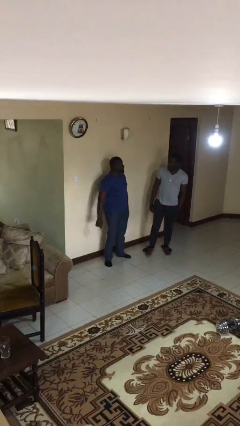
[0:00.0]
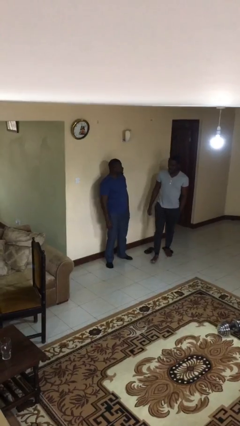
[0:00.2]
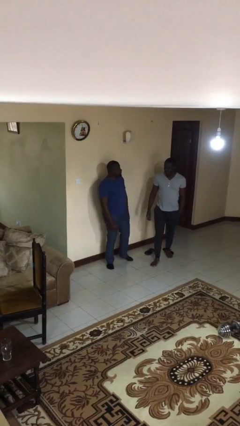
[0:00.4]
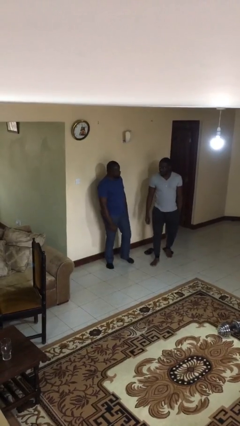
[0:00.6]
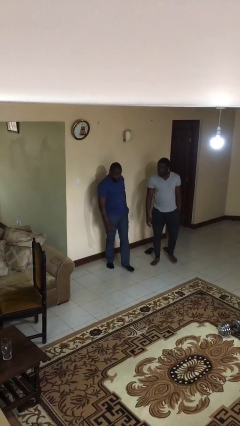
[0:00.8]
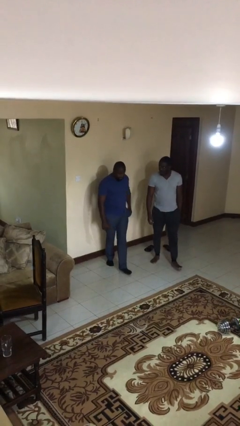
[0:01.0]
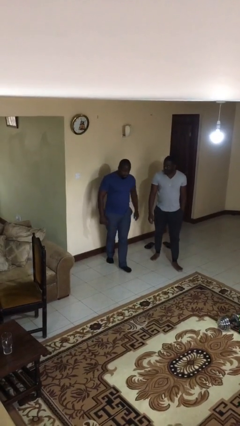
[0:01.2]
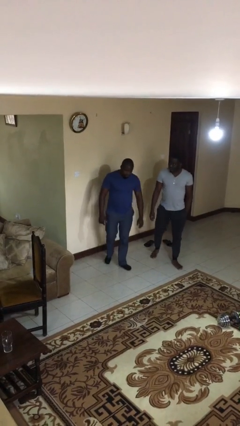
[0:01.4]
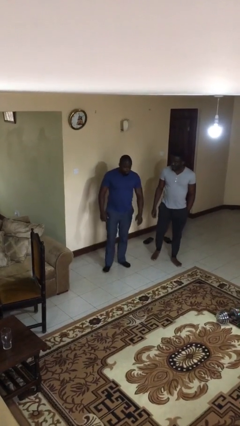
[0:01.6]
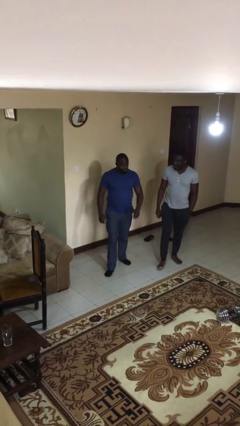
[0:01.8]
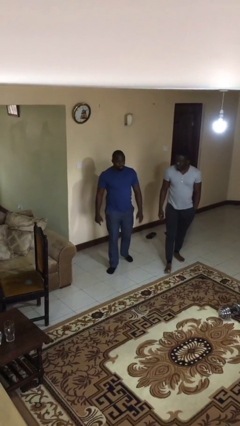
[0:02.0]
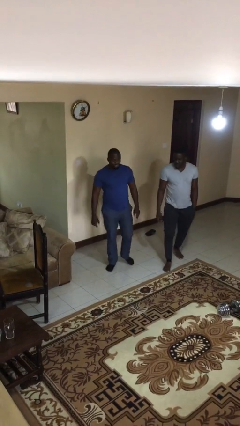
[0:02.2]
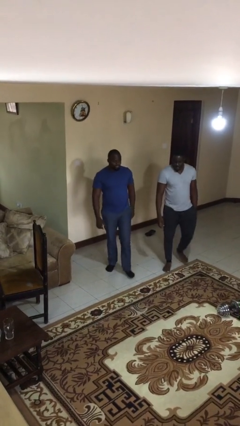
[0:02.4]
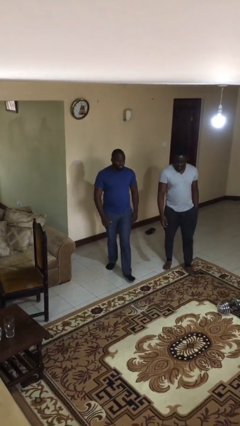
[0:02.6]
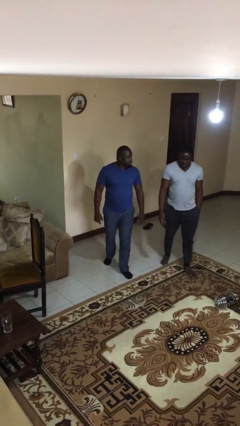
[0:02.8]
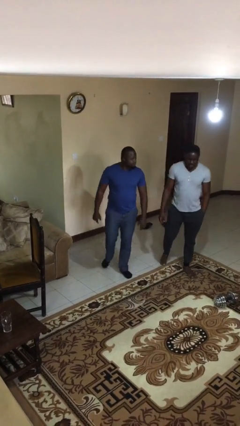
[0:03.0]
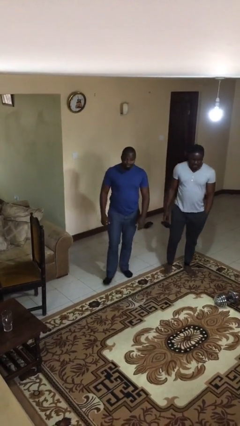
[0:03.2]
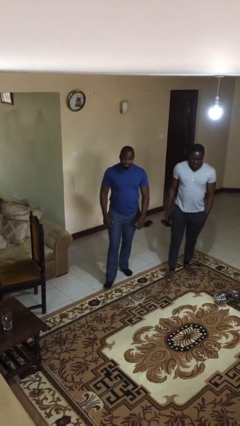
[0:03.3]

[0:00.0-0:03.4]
person talks to person

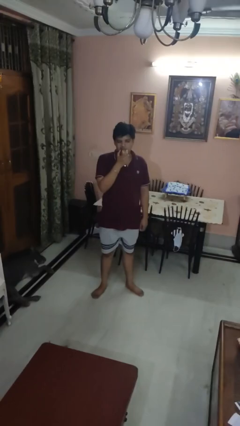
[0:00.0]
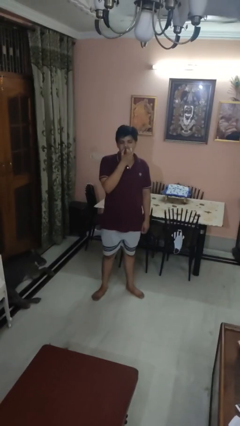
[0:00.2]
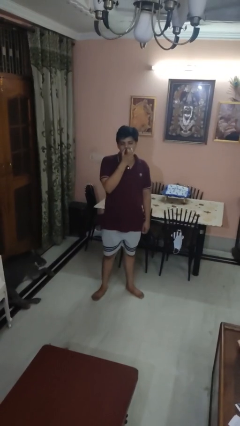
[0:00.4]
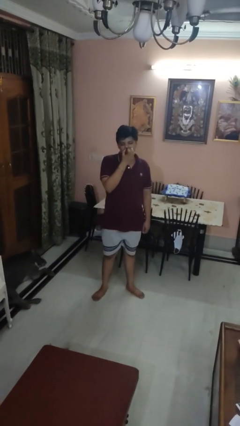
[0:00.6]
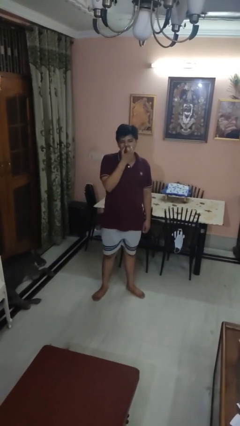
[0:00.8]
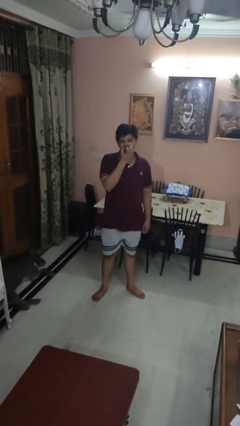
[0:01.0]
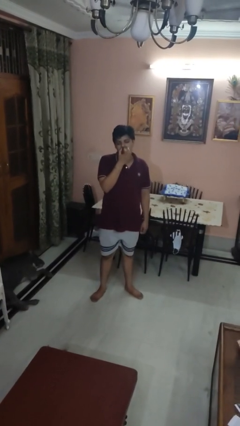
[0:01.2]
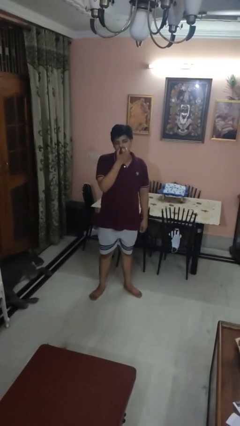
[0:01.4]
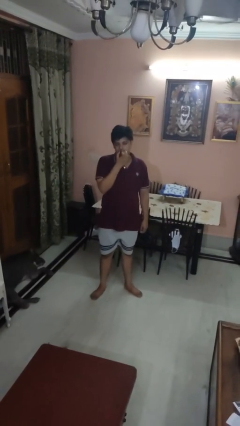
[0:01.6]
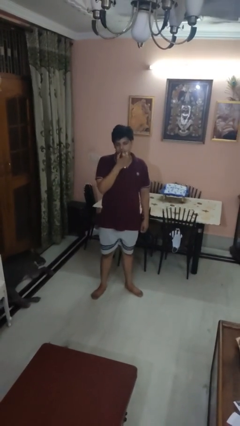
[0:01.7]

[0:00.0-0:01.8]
person eats apple

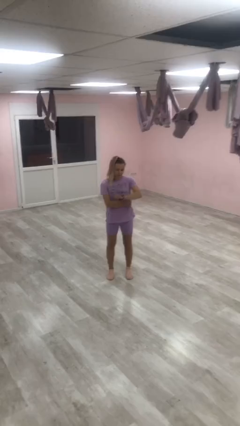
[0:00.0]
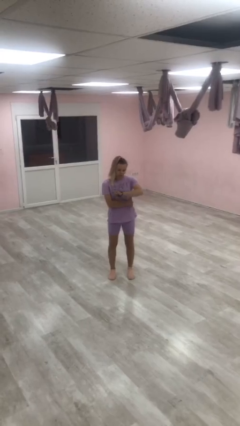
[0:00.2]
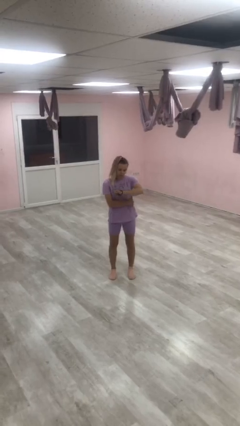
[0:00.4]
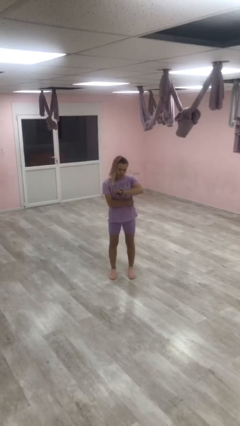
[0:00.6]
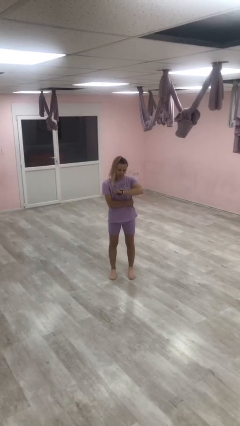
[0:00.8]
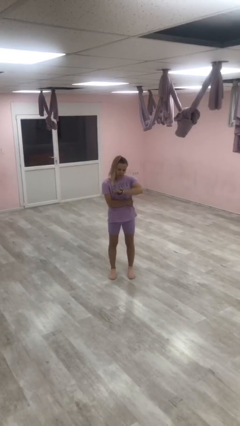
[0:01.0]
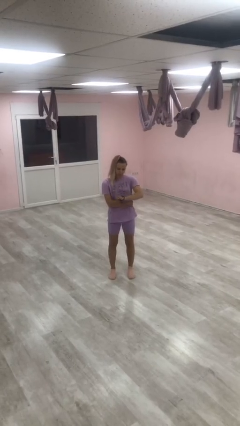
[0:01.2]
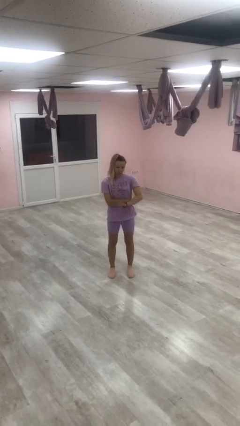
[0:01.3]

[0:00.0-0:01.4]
person looks at wristwatch

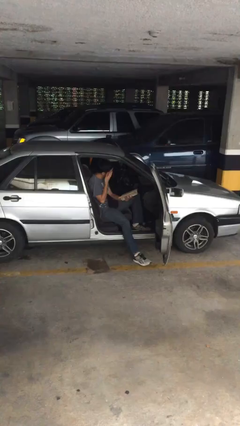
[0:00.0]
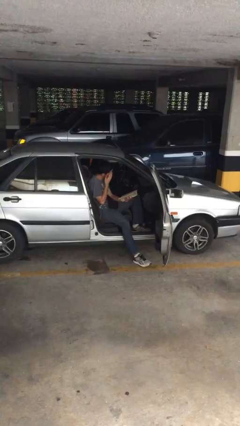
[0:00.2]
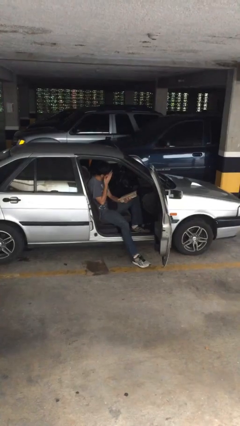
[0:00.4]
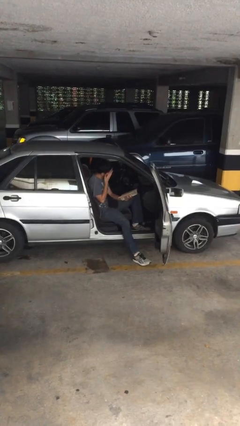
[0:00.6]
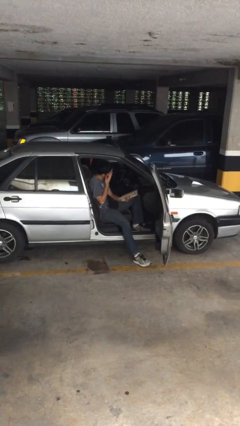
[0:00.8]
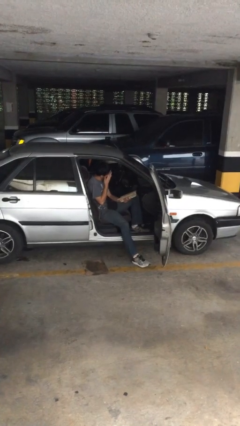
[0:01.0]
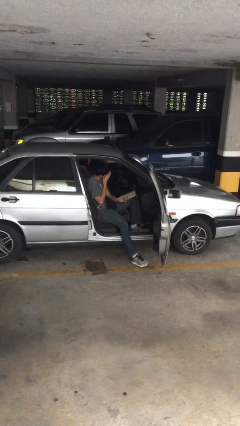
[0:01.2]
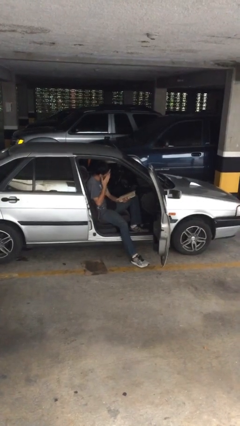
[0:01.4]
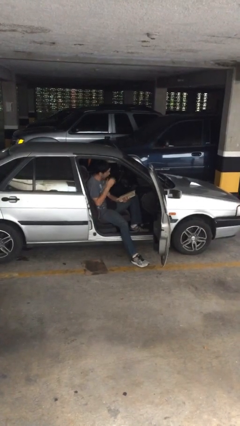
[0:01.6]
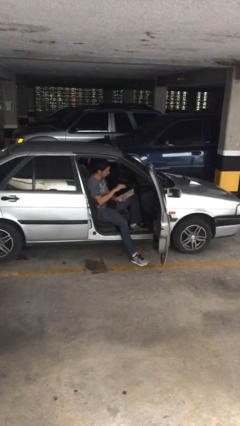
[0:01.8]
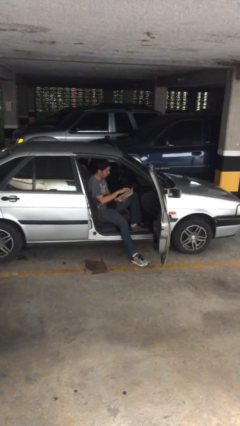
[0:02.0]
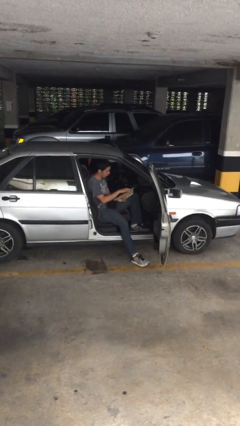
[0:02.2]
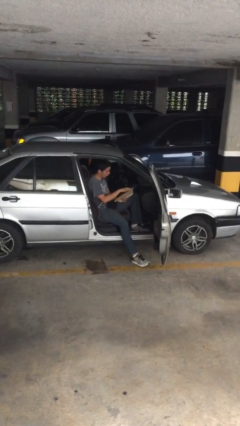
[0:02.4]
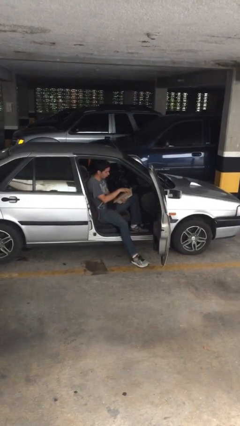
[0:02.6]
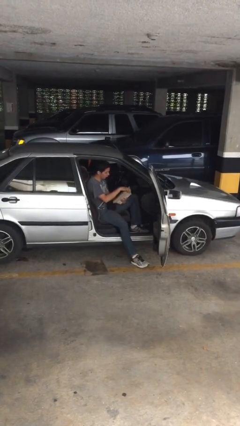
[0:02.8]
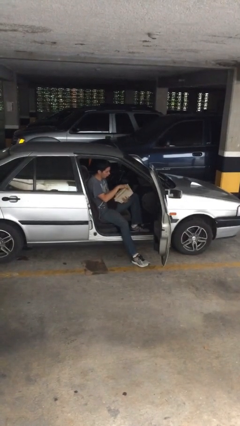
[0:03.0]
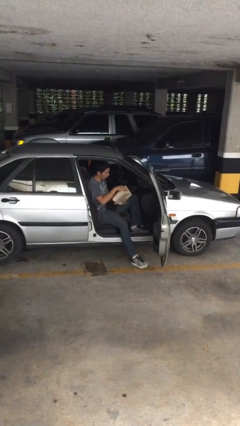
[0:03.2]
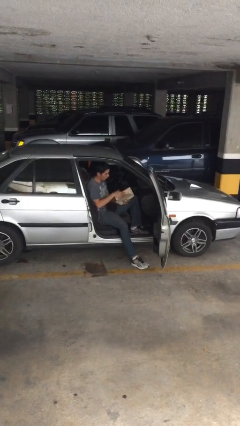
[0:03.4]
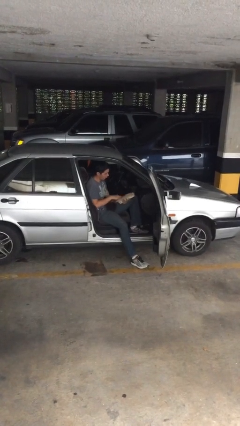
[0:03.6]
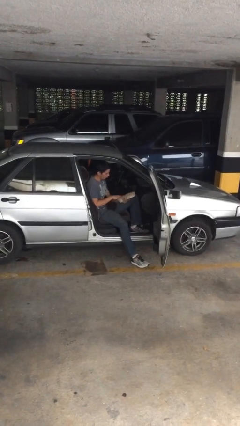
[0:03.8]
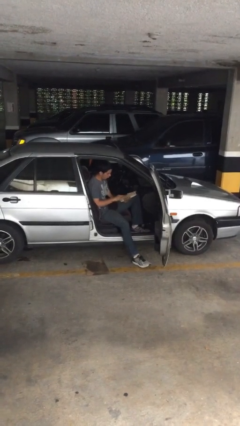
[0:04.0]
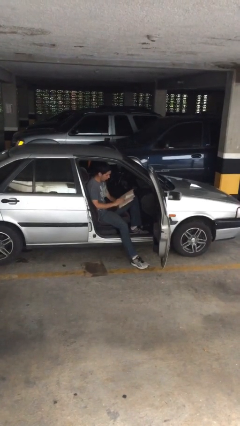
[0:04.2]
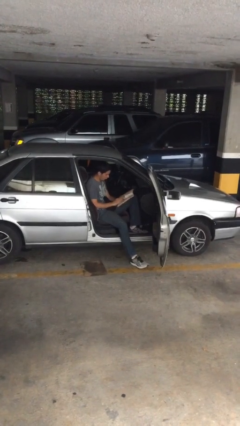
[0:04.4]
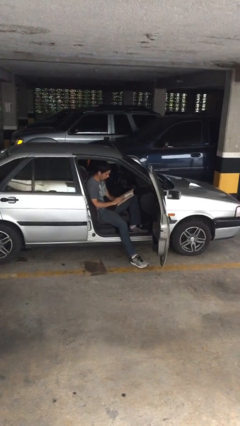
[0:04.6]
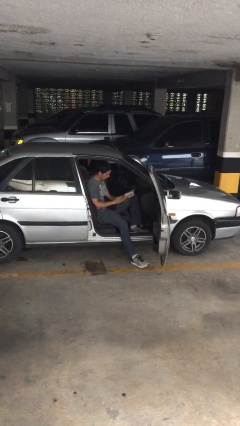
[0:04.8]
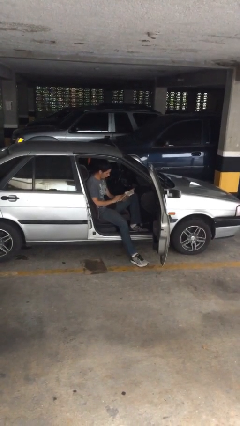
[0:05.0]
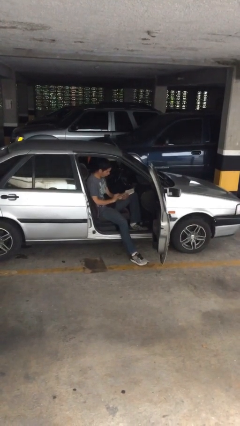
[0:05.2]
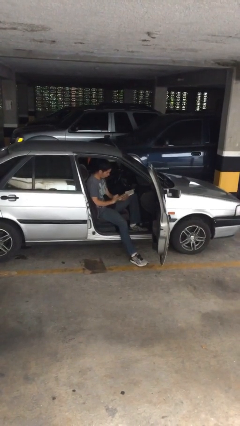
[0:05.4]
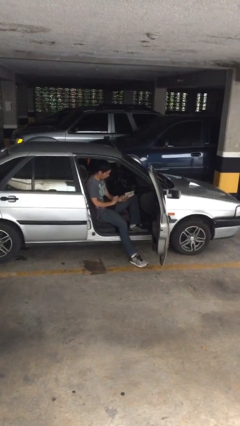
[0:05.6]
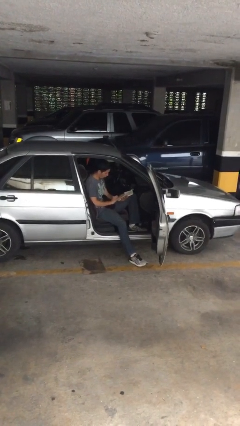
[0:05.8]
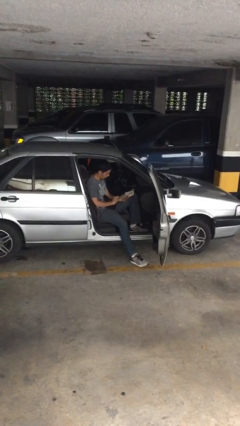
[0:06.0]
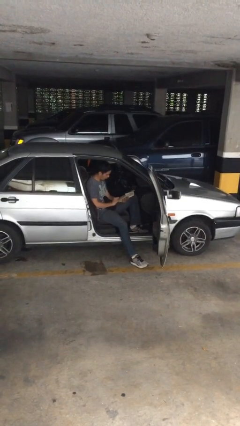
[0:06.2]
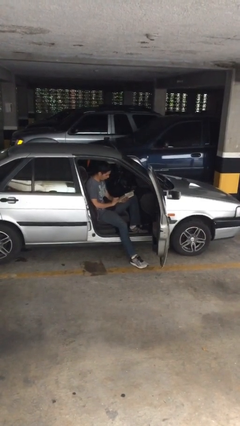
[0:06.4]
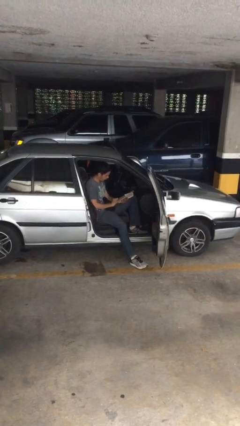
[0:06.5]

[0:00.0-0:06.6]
person reads document

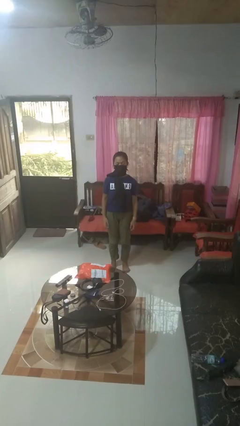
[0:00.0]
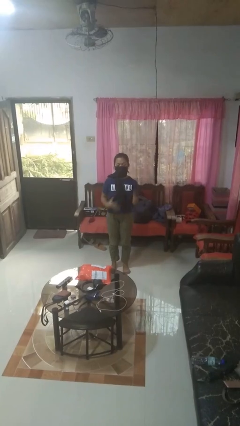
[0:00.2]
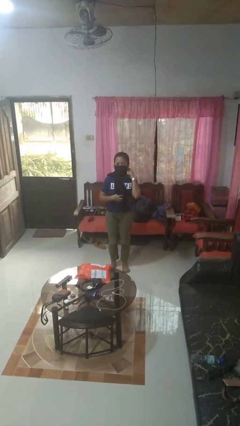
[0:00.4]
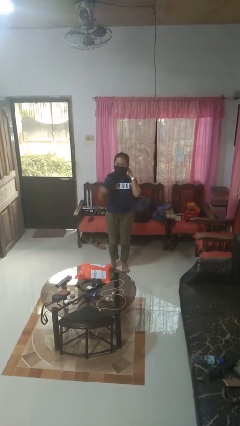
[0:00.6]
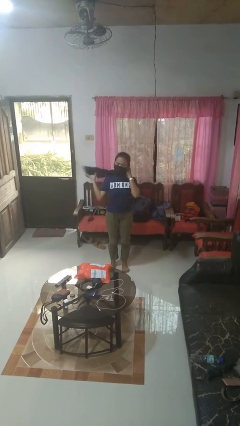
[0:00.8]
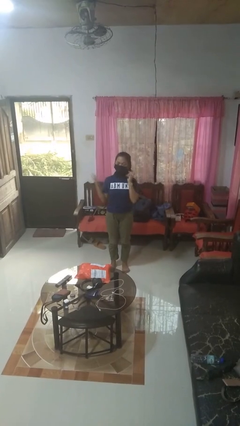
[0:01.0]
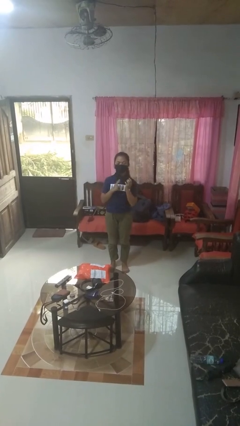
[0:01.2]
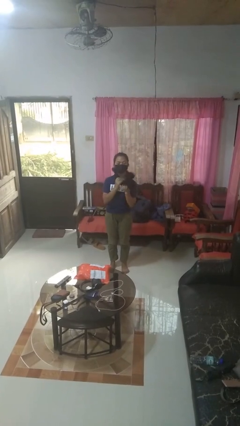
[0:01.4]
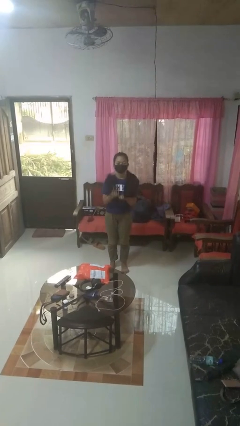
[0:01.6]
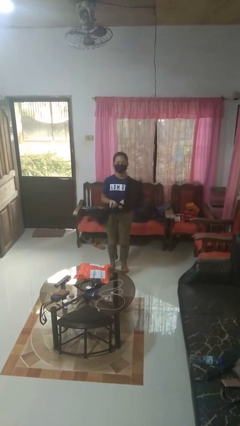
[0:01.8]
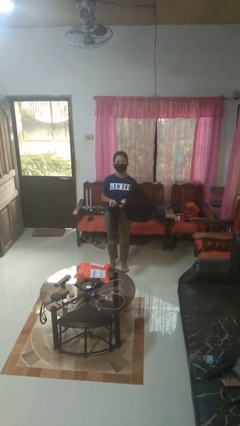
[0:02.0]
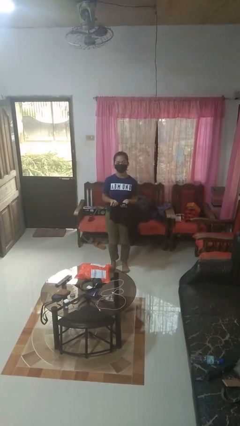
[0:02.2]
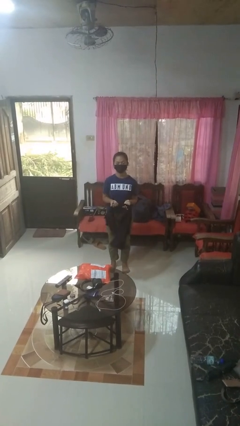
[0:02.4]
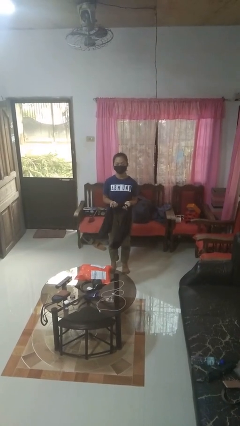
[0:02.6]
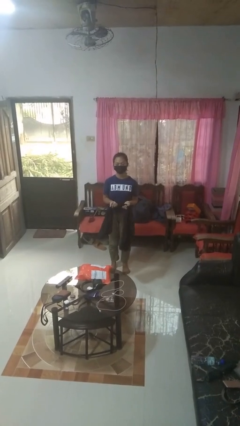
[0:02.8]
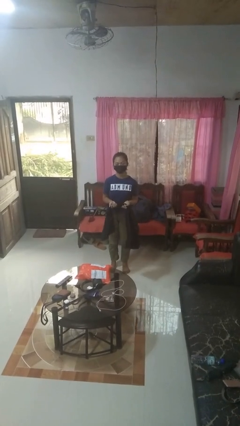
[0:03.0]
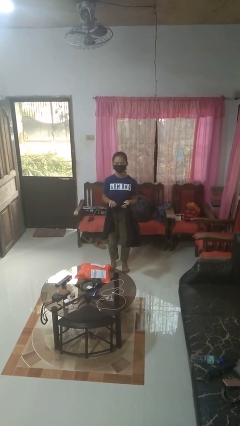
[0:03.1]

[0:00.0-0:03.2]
person takes off scarf

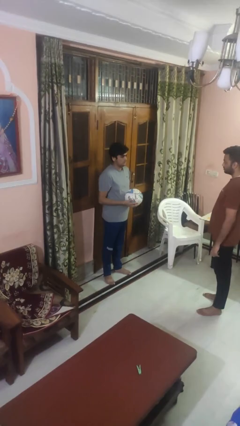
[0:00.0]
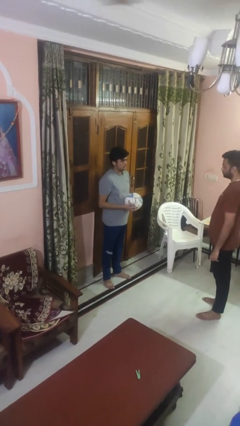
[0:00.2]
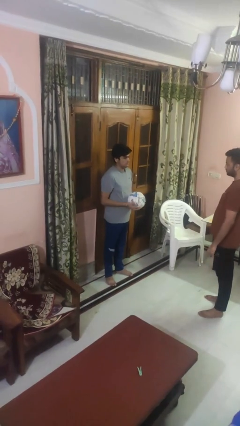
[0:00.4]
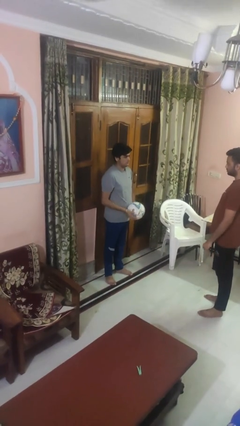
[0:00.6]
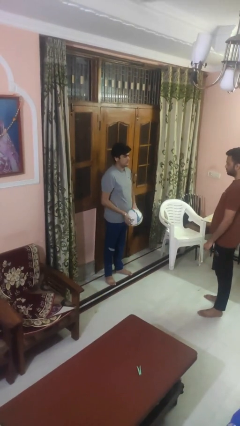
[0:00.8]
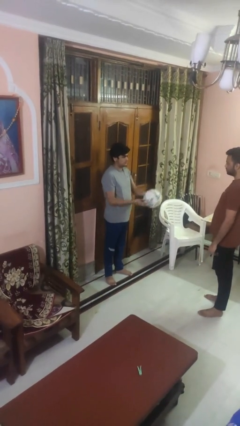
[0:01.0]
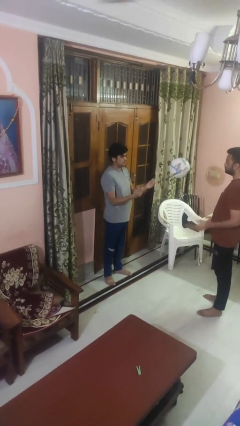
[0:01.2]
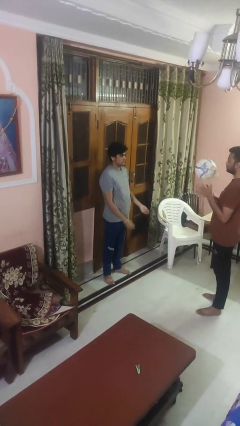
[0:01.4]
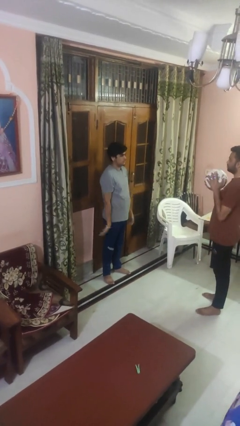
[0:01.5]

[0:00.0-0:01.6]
person throws object to person
